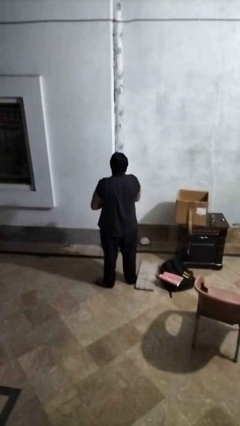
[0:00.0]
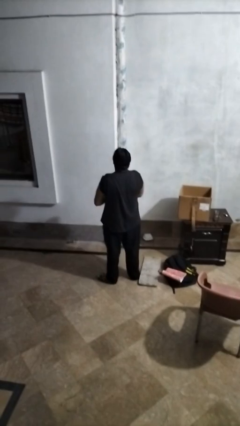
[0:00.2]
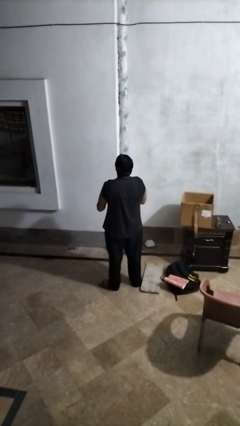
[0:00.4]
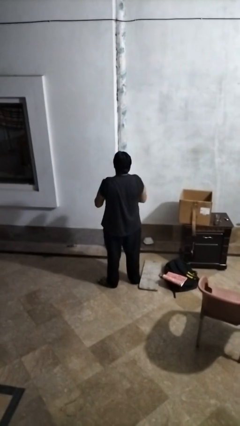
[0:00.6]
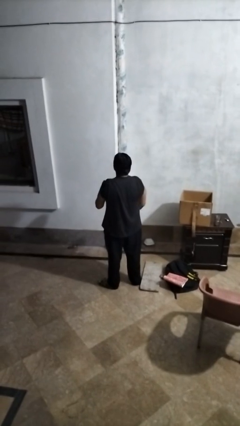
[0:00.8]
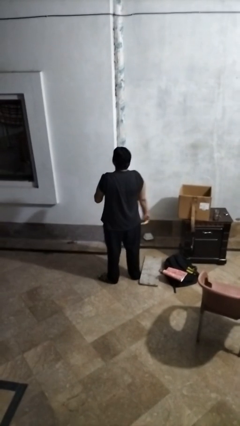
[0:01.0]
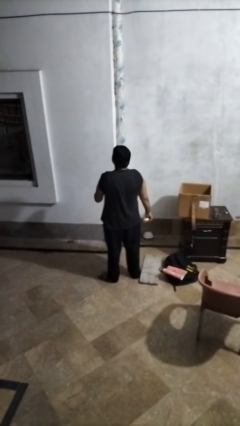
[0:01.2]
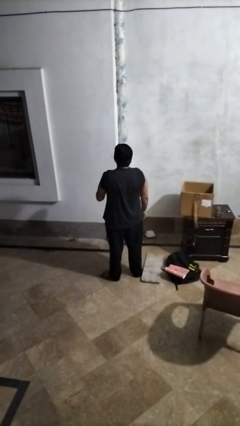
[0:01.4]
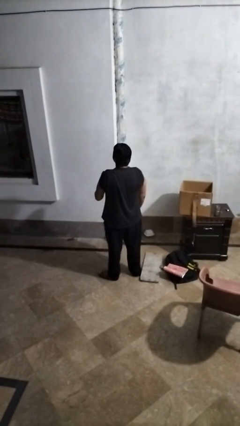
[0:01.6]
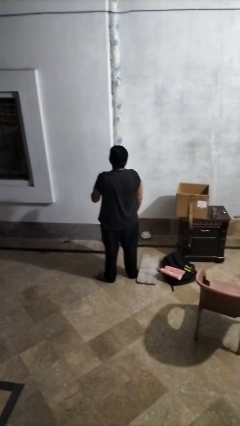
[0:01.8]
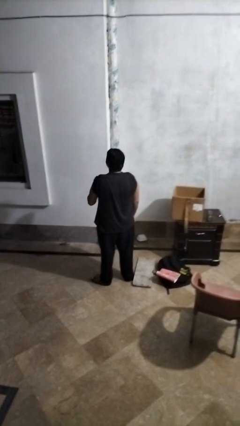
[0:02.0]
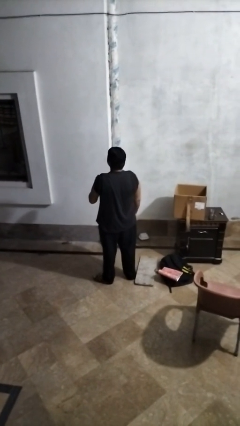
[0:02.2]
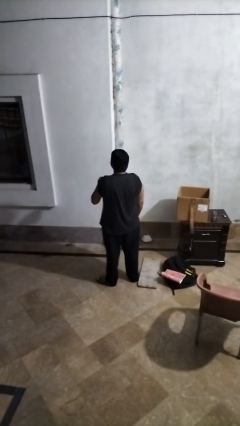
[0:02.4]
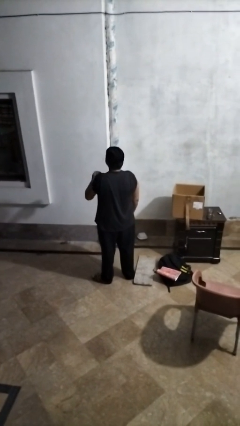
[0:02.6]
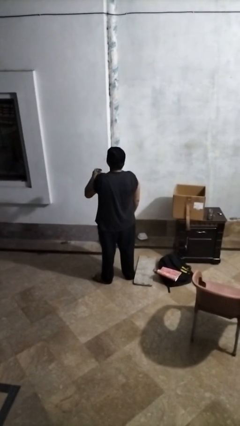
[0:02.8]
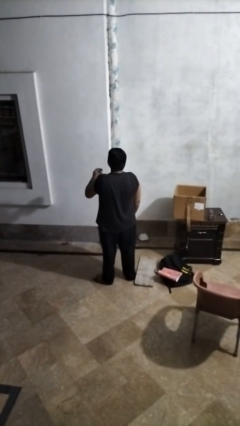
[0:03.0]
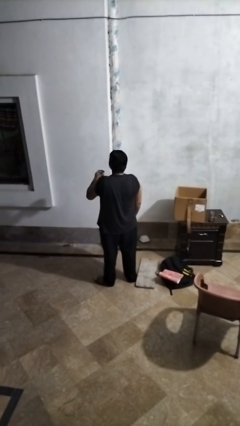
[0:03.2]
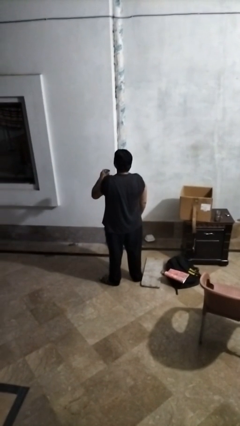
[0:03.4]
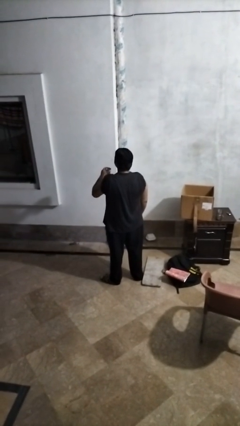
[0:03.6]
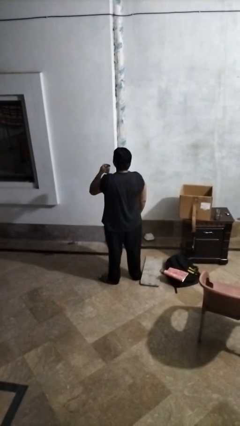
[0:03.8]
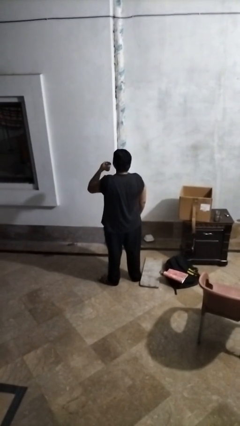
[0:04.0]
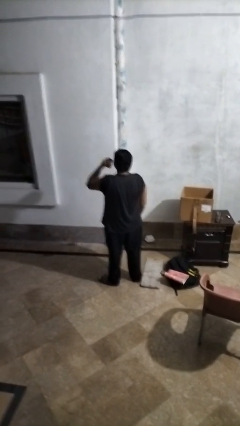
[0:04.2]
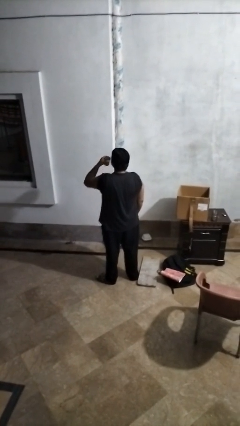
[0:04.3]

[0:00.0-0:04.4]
person opens beverage can

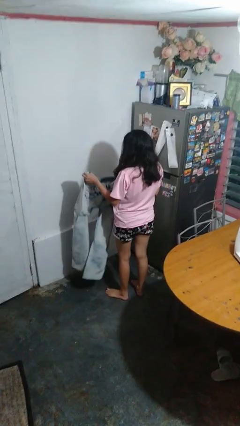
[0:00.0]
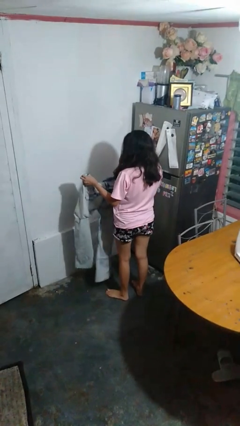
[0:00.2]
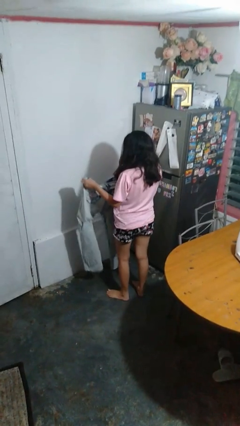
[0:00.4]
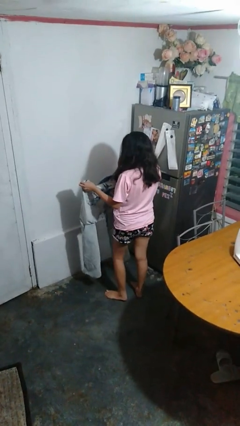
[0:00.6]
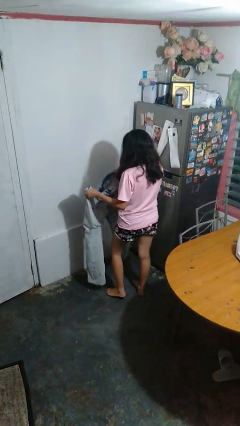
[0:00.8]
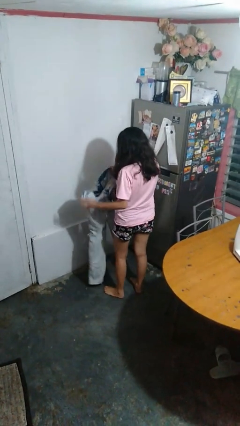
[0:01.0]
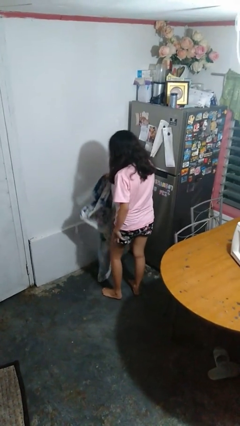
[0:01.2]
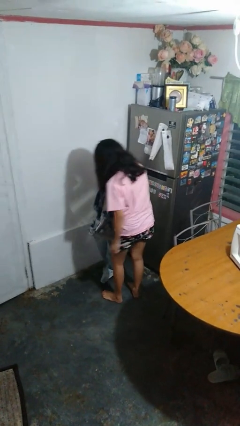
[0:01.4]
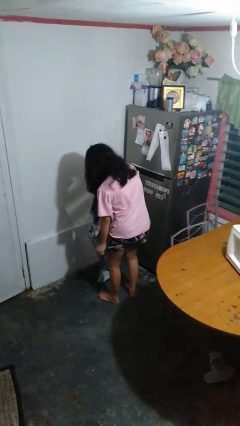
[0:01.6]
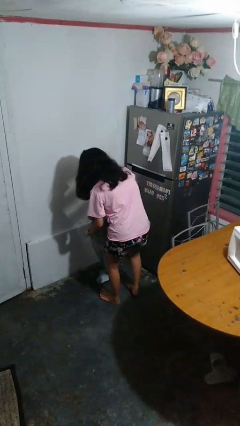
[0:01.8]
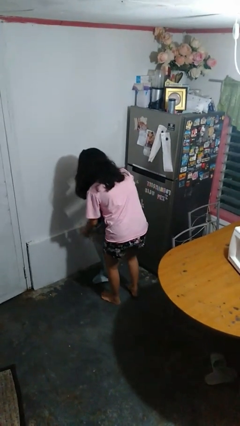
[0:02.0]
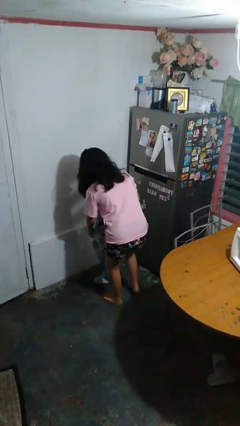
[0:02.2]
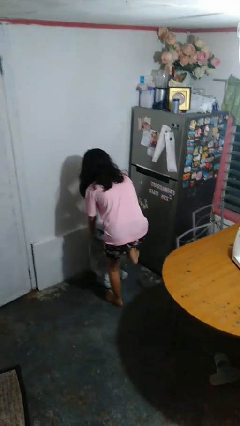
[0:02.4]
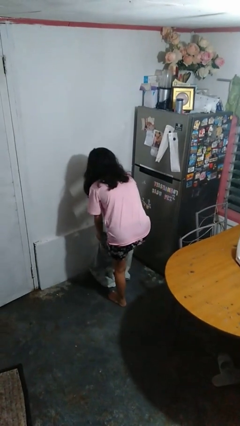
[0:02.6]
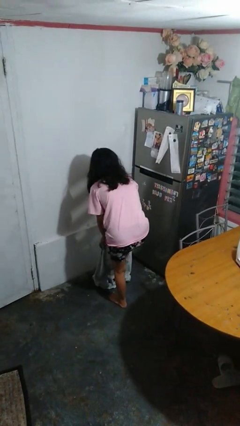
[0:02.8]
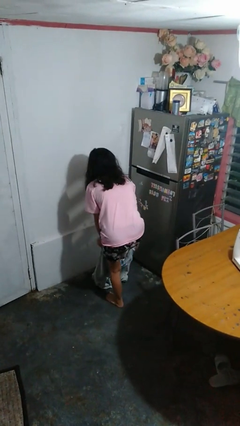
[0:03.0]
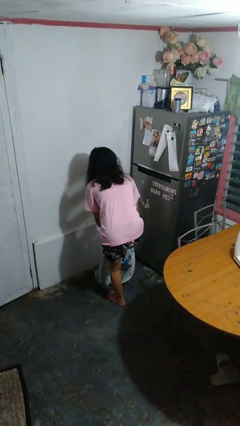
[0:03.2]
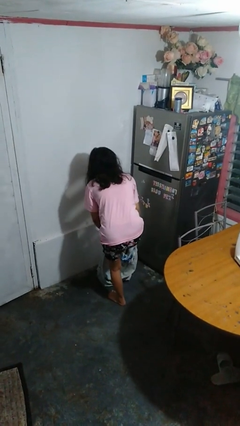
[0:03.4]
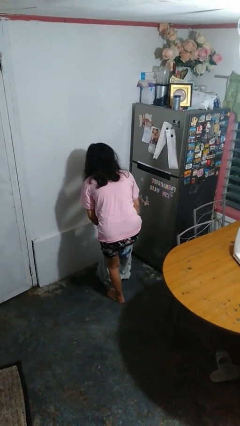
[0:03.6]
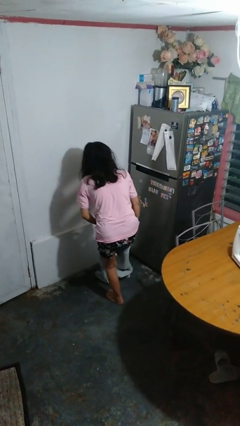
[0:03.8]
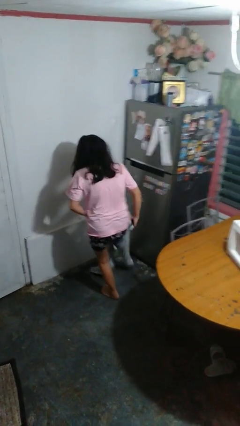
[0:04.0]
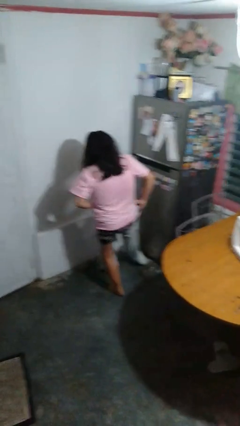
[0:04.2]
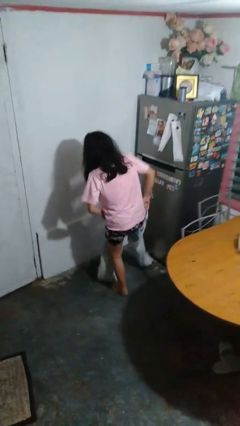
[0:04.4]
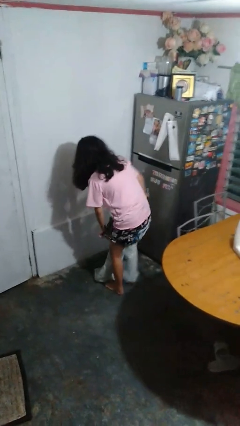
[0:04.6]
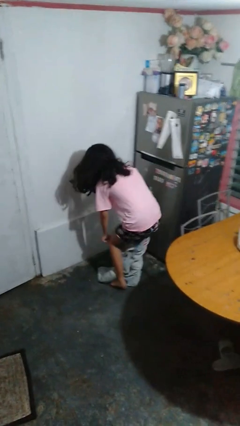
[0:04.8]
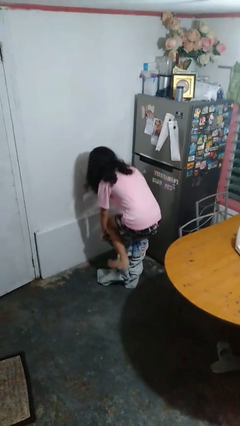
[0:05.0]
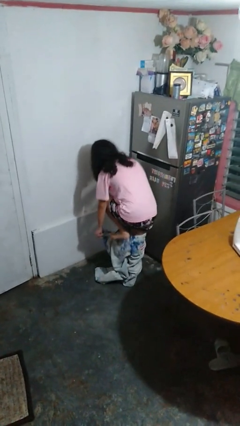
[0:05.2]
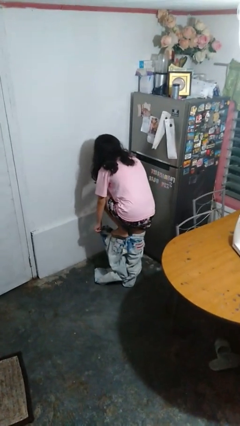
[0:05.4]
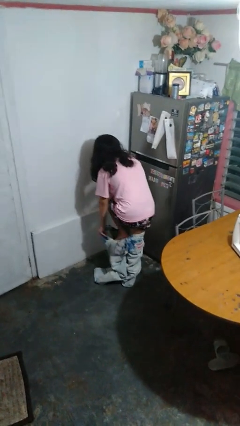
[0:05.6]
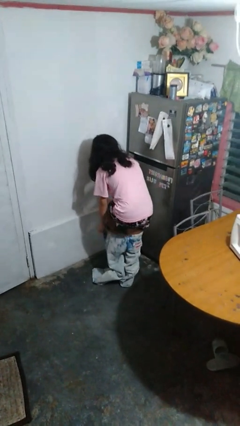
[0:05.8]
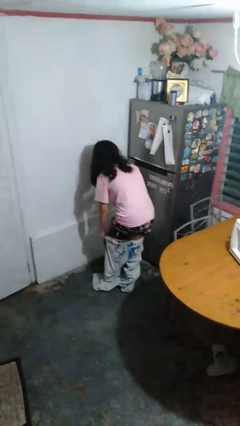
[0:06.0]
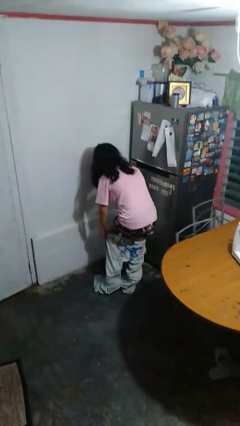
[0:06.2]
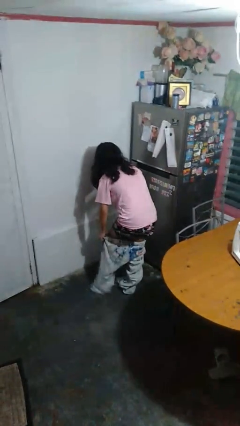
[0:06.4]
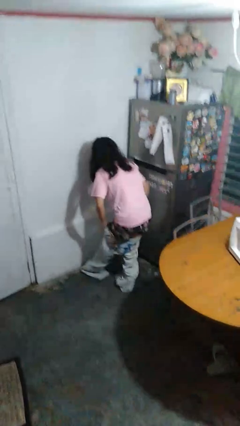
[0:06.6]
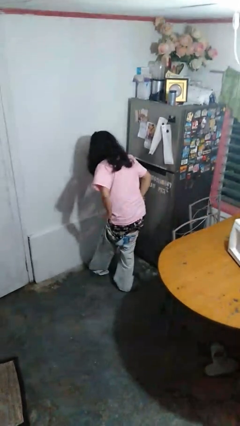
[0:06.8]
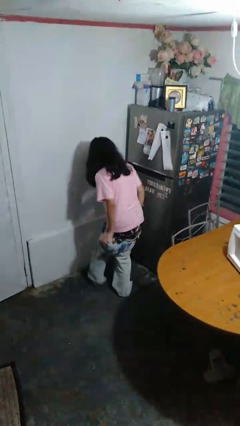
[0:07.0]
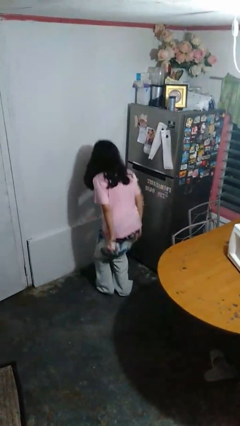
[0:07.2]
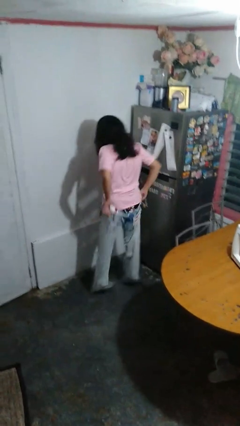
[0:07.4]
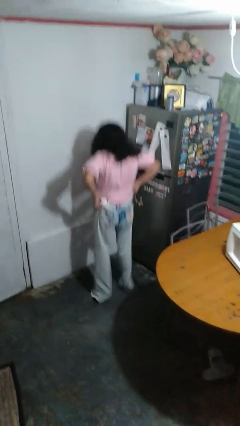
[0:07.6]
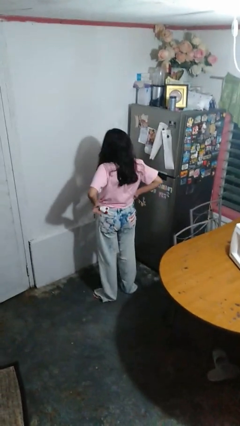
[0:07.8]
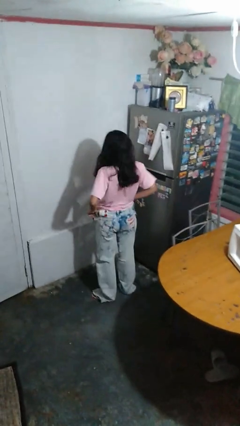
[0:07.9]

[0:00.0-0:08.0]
person puts on pants

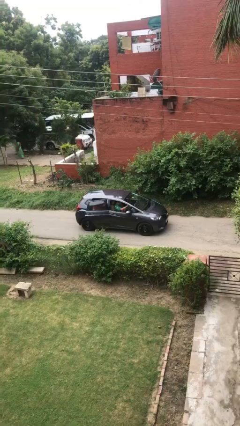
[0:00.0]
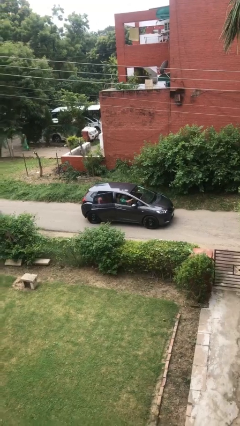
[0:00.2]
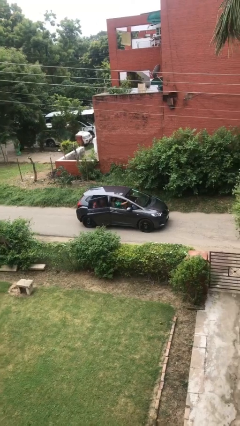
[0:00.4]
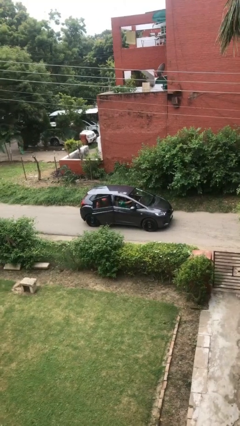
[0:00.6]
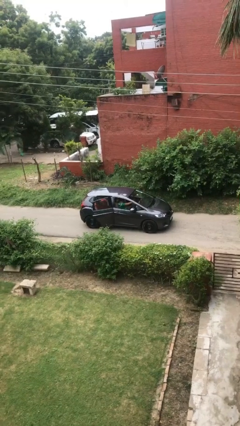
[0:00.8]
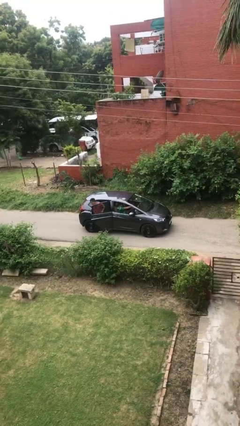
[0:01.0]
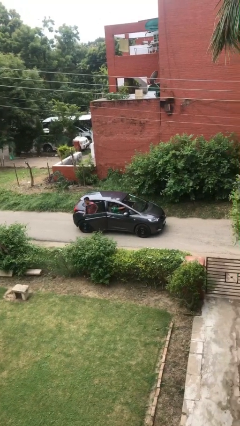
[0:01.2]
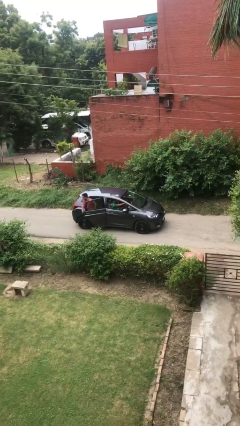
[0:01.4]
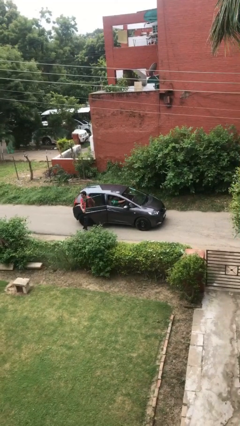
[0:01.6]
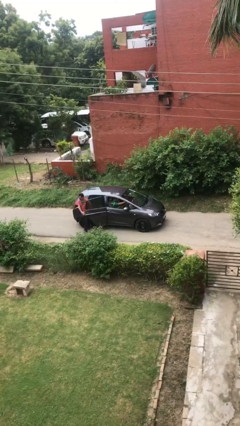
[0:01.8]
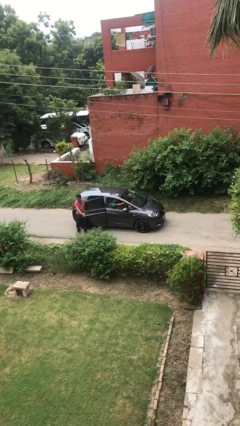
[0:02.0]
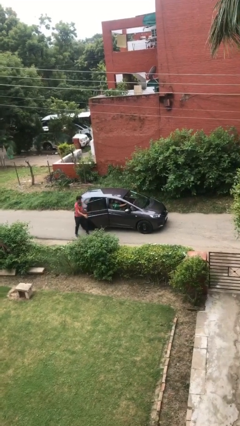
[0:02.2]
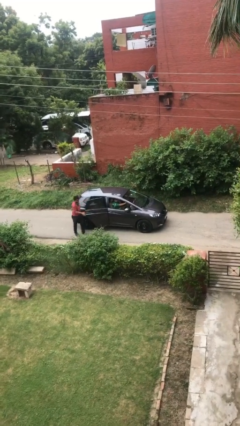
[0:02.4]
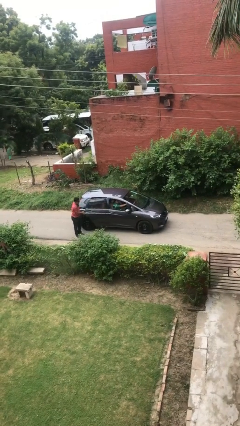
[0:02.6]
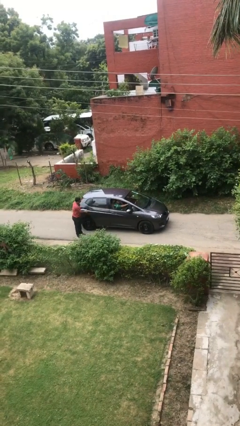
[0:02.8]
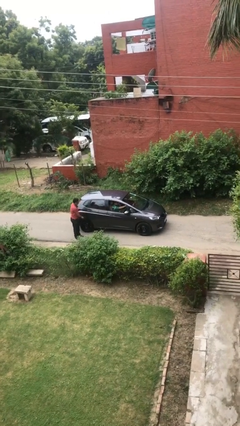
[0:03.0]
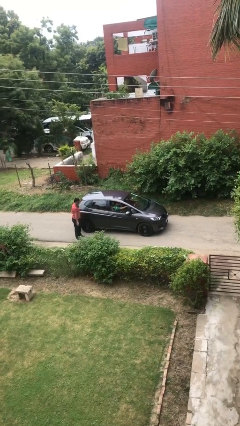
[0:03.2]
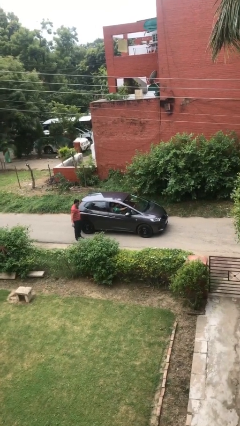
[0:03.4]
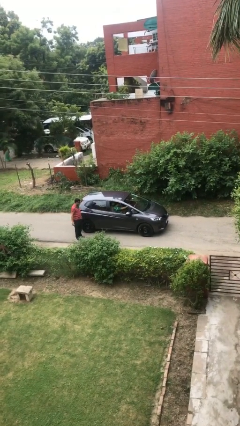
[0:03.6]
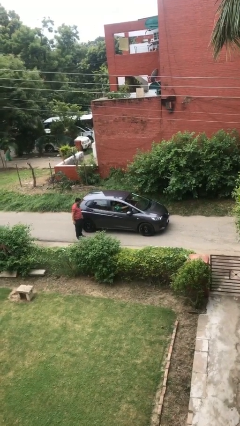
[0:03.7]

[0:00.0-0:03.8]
car drops off person

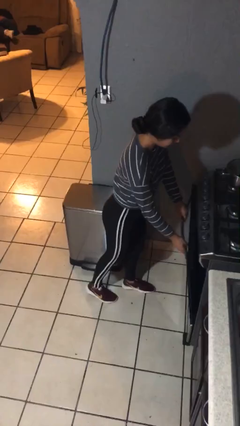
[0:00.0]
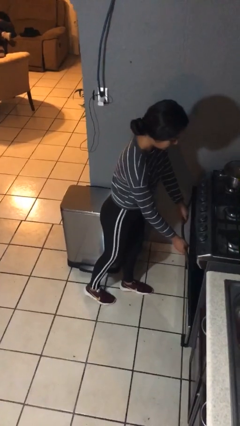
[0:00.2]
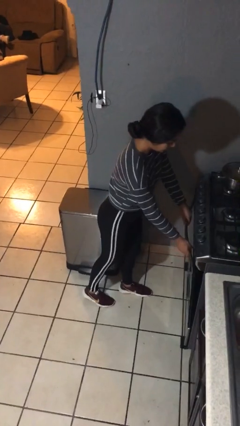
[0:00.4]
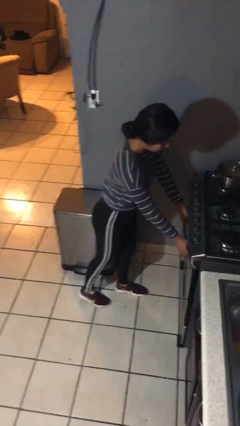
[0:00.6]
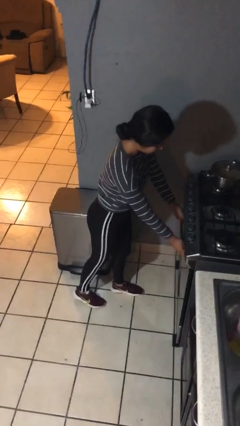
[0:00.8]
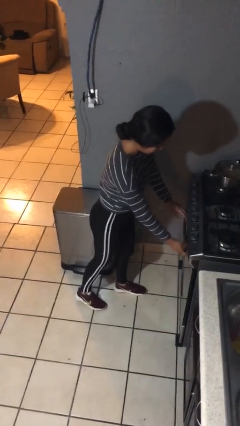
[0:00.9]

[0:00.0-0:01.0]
person closes oven door

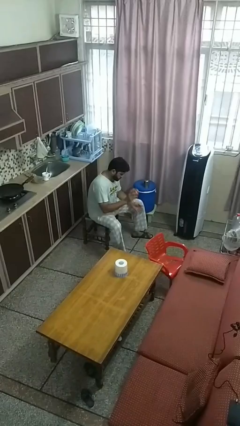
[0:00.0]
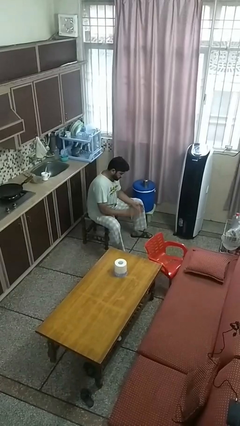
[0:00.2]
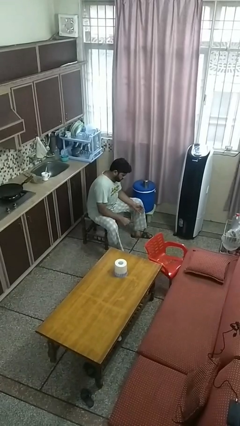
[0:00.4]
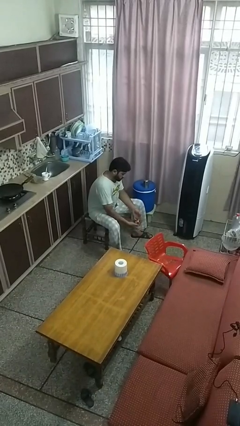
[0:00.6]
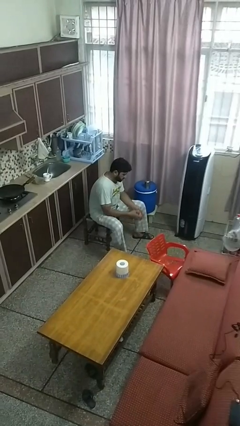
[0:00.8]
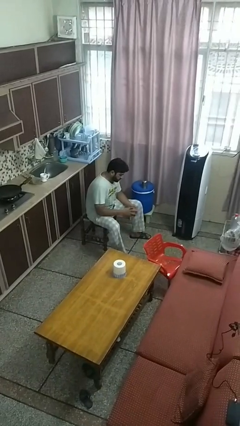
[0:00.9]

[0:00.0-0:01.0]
person bounces ball on floor
